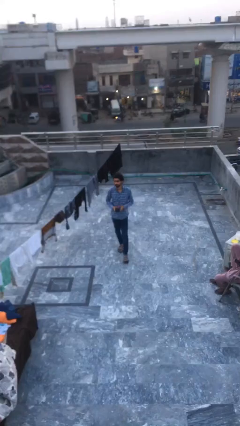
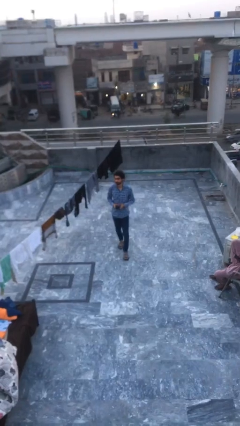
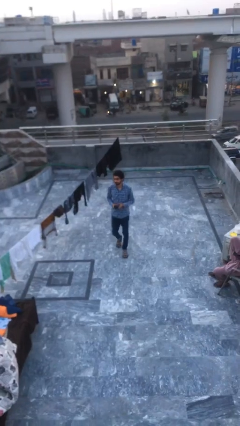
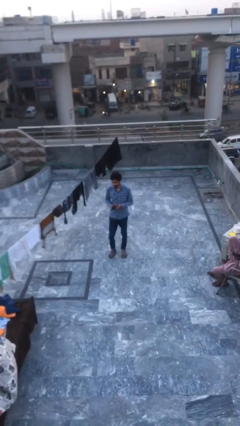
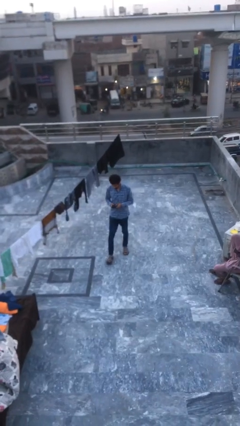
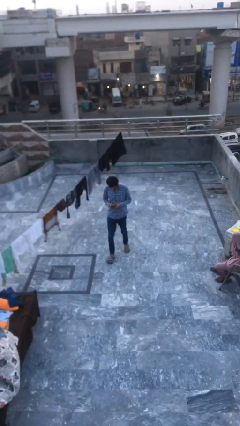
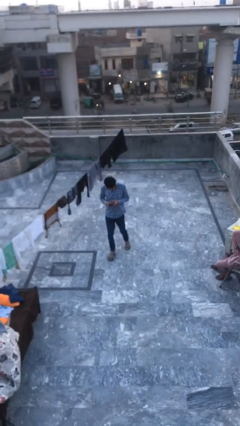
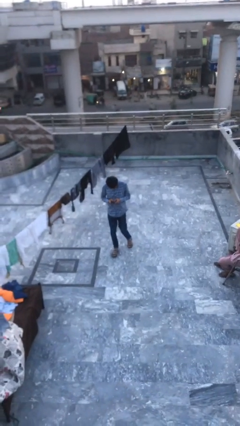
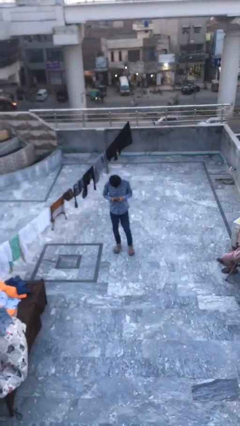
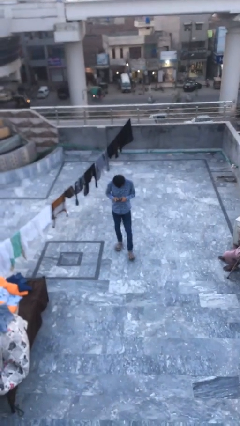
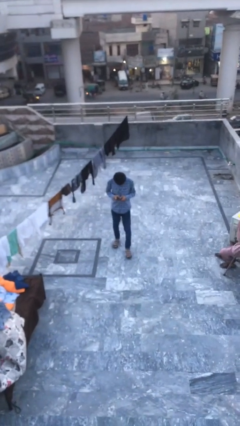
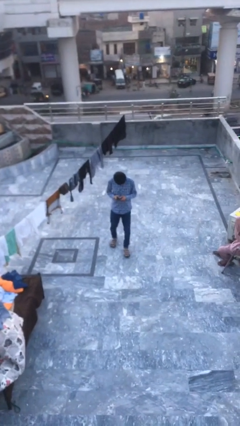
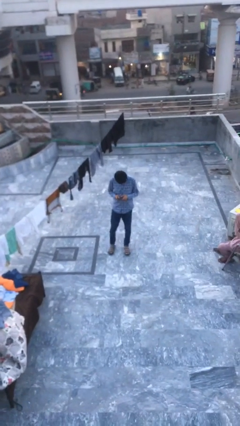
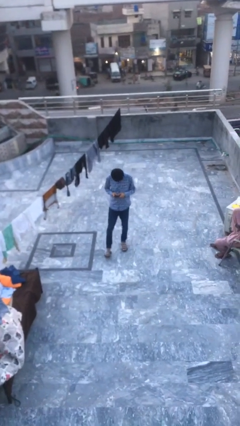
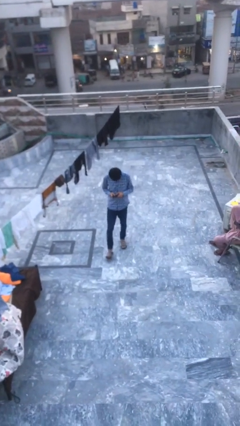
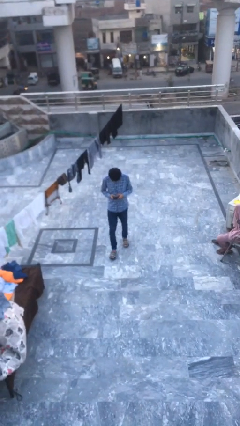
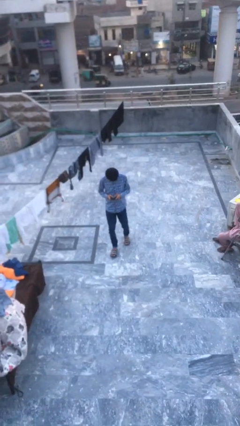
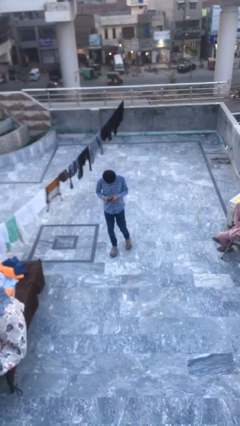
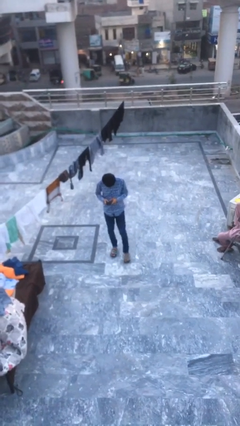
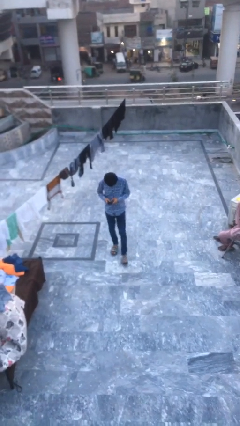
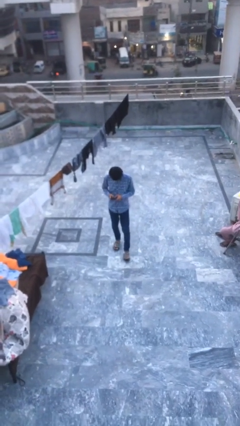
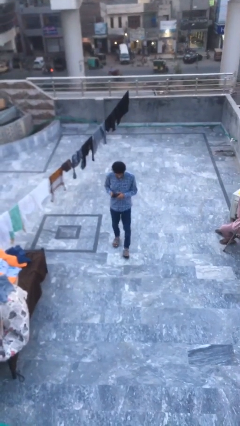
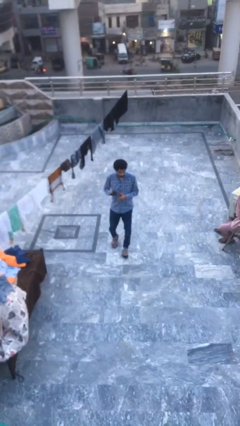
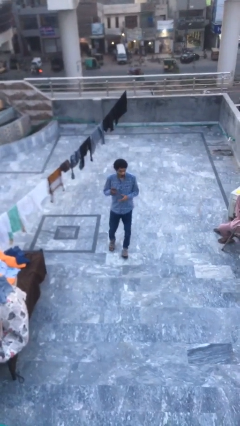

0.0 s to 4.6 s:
person texts on phone

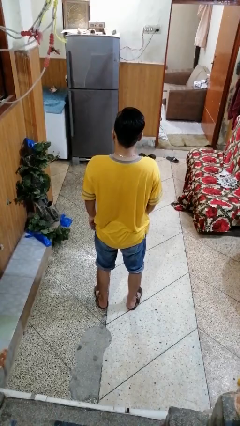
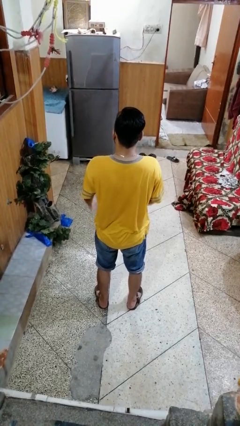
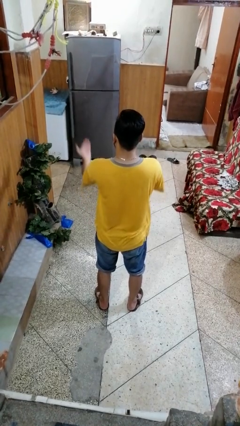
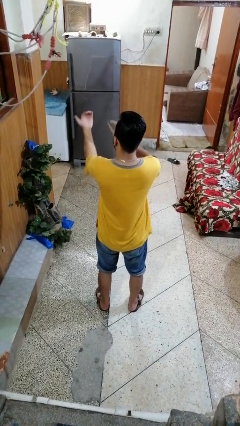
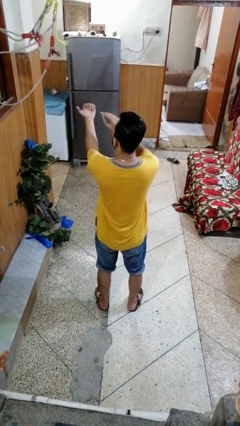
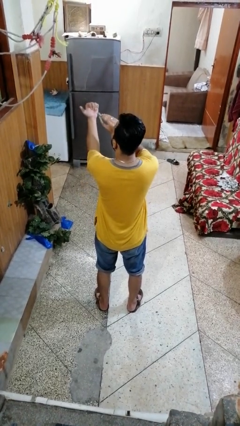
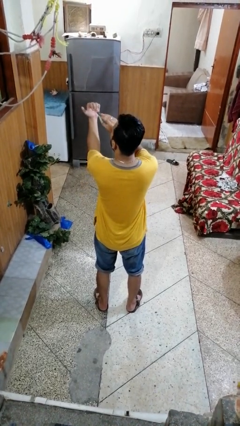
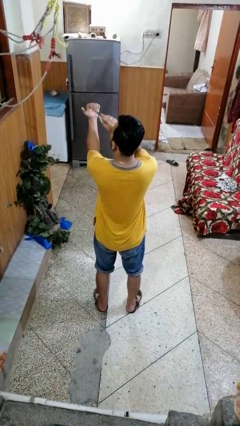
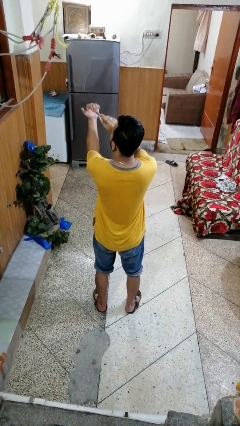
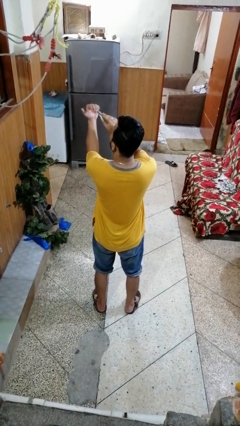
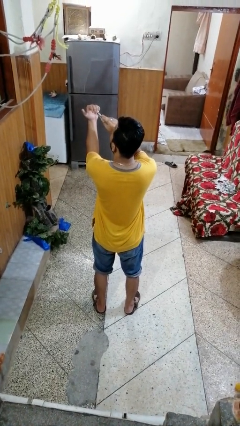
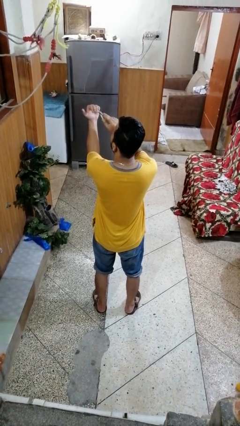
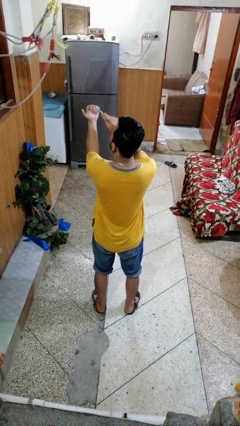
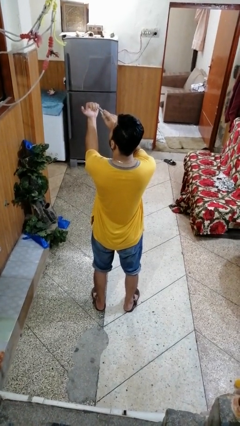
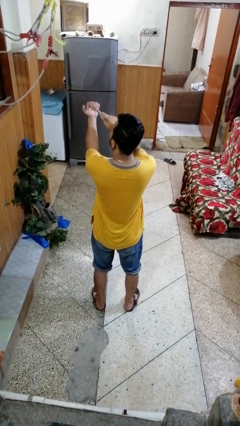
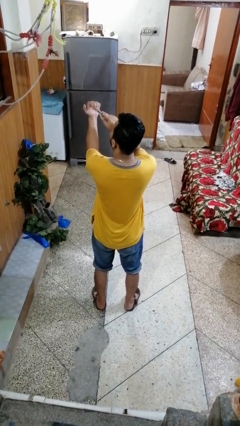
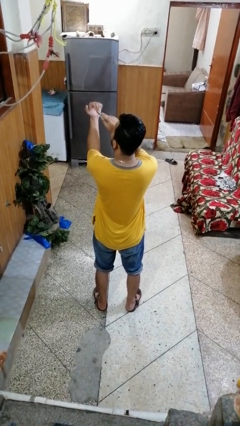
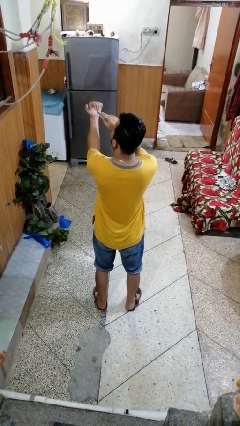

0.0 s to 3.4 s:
person clips fingernails

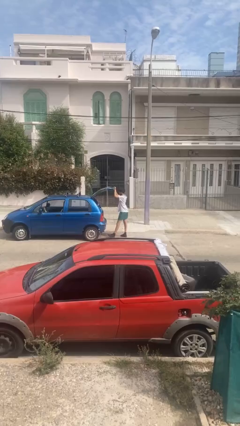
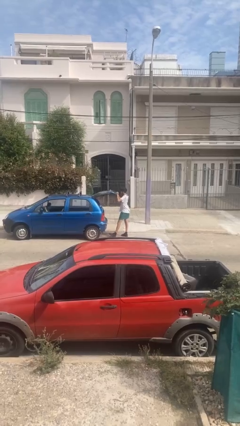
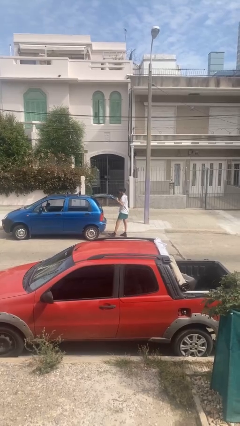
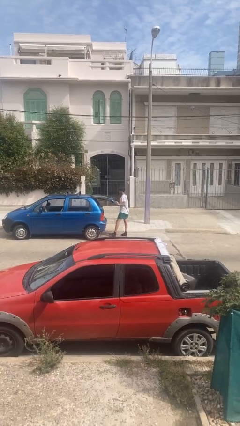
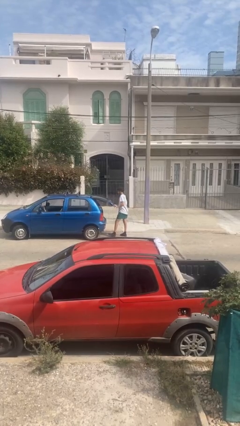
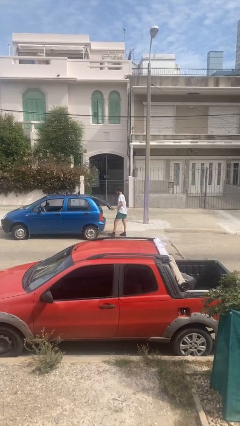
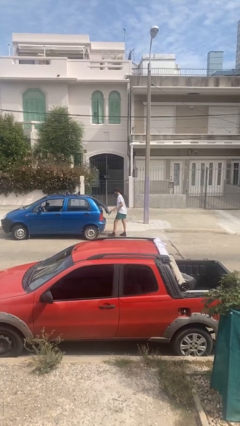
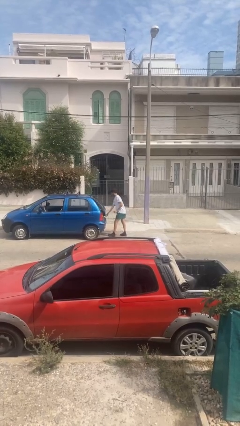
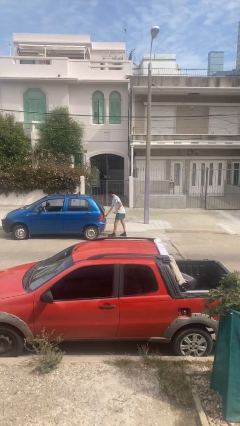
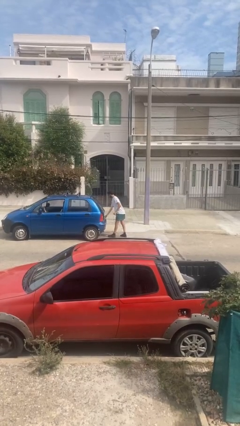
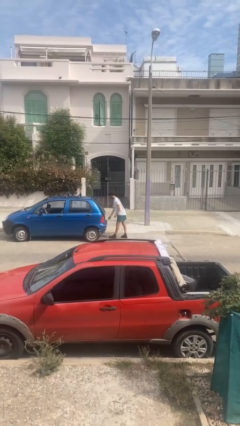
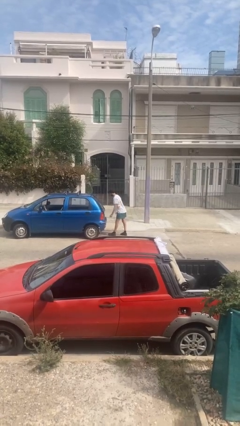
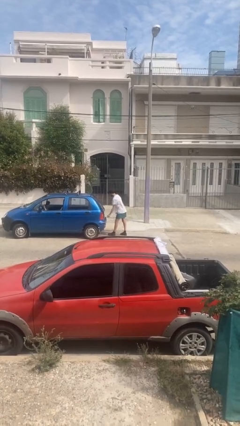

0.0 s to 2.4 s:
person closes car trunk

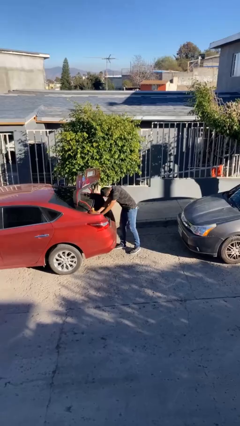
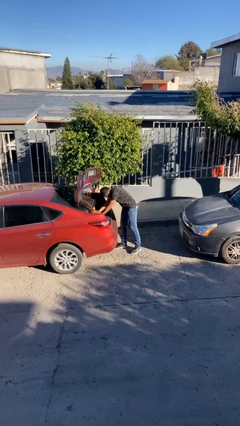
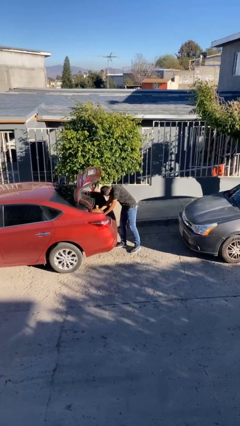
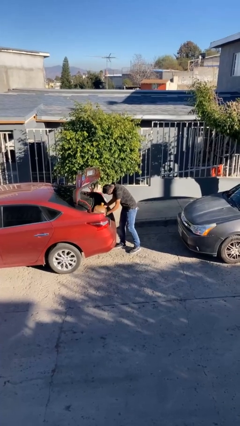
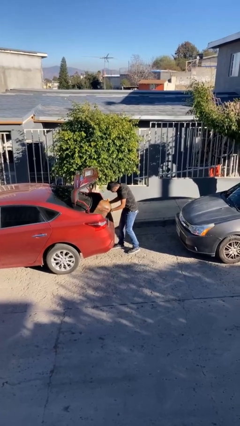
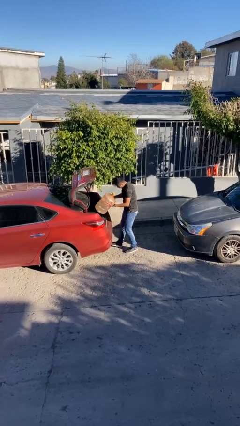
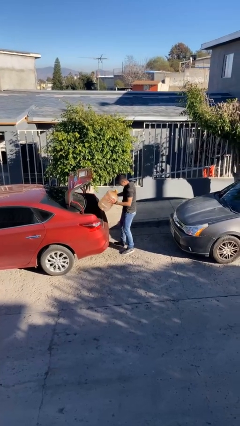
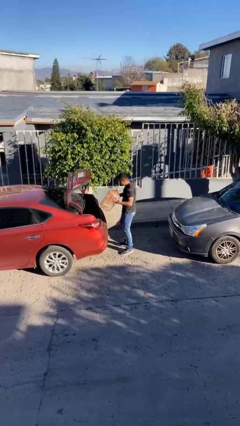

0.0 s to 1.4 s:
person unloads car

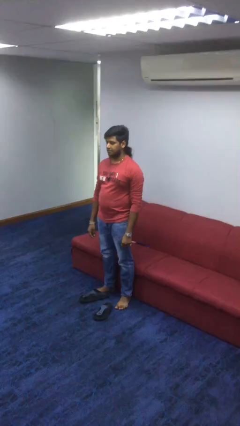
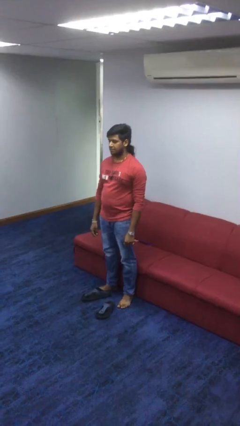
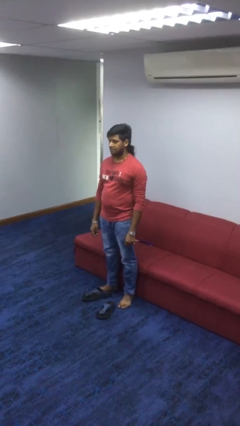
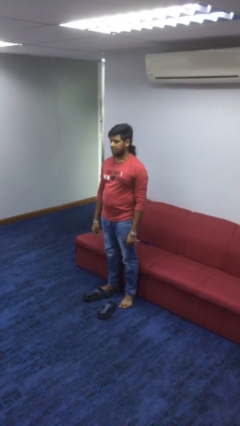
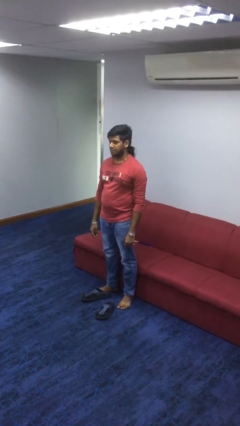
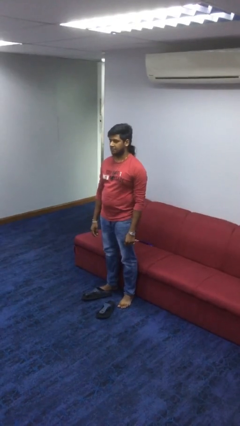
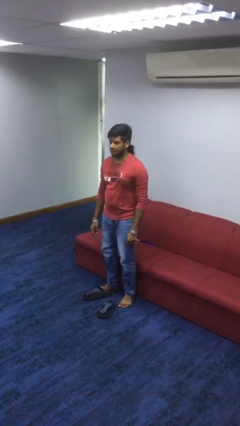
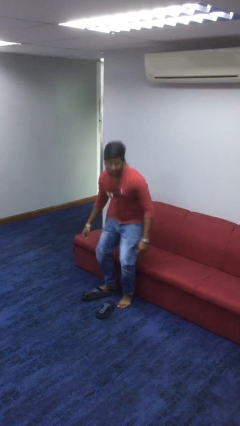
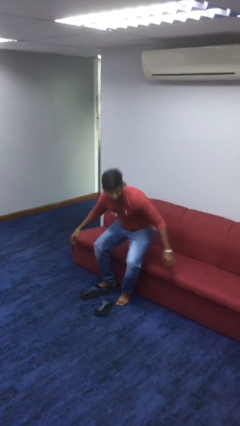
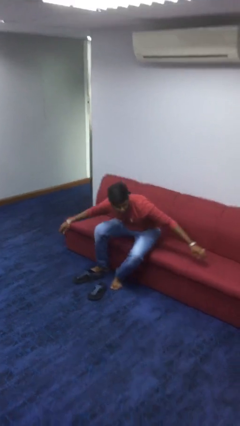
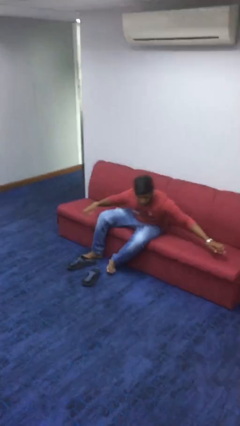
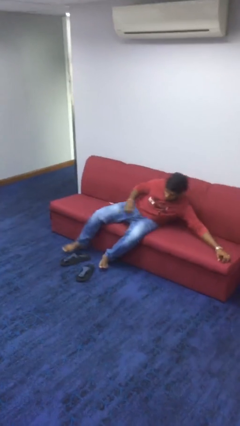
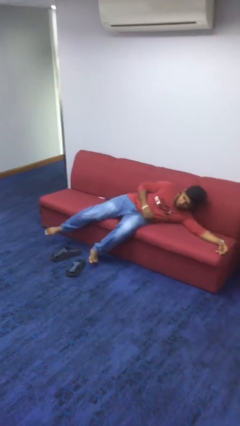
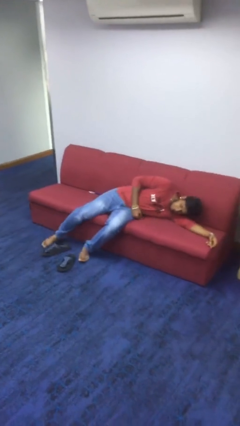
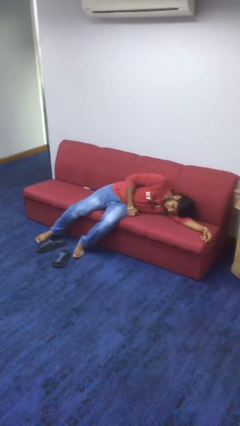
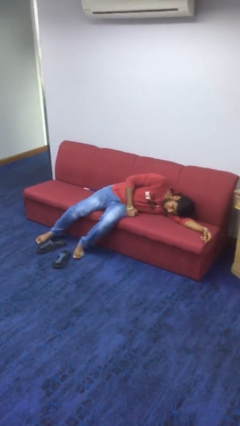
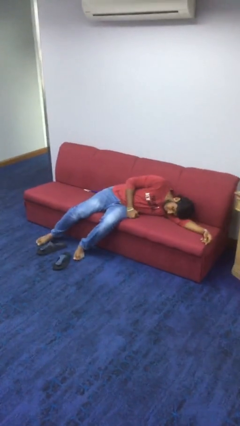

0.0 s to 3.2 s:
person lies down on couch

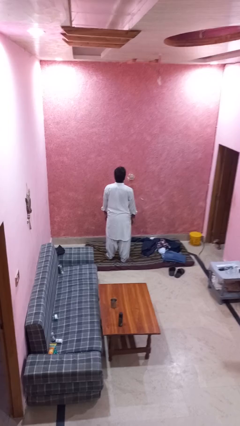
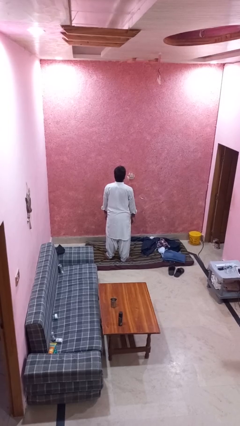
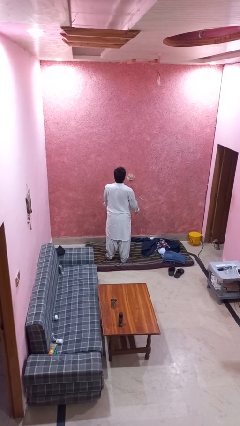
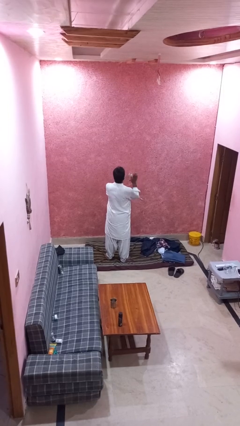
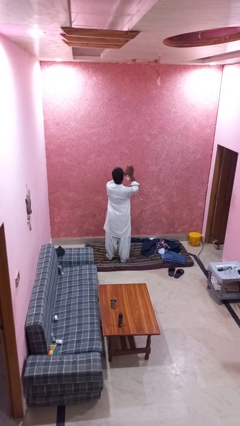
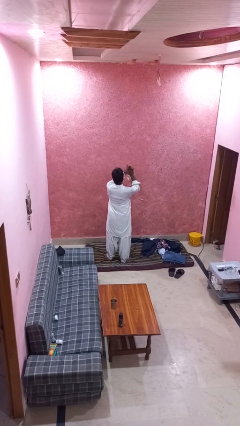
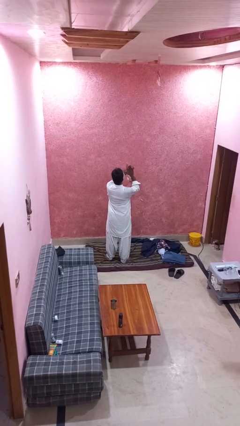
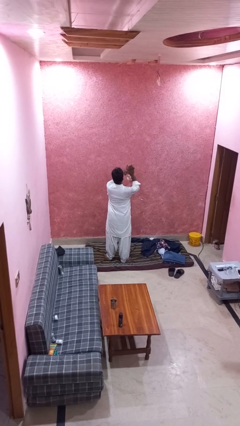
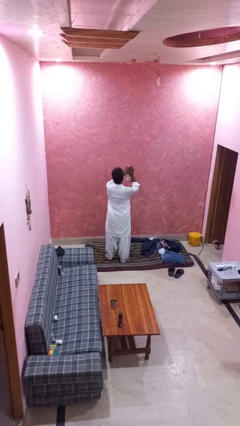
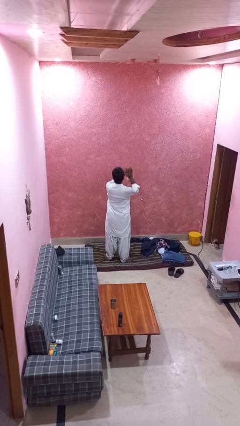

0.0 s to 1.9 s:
person claps hands

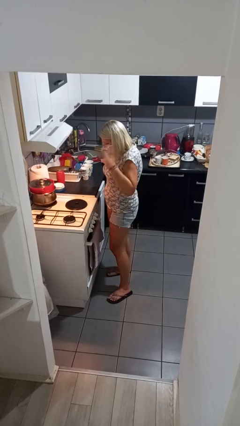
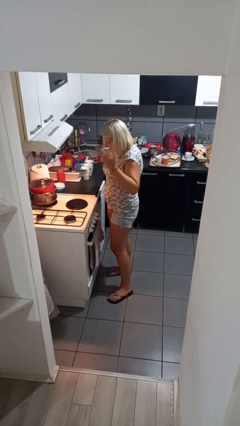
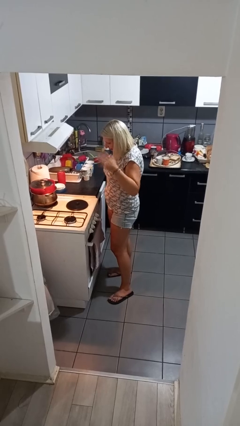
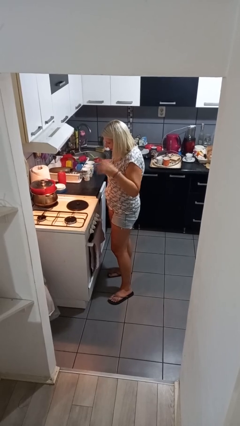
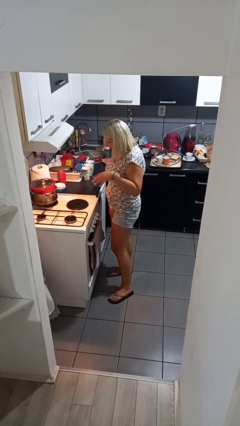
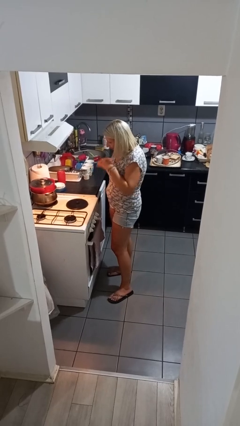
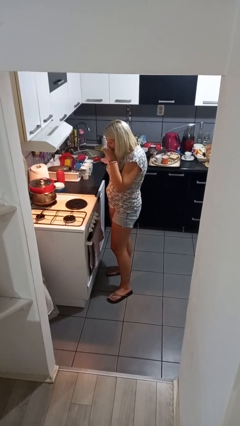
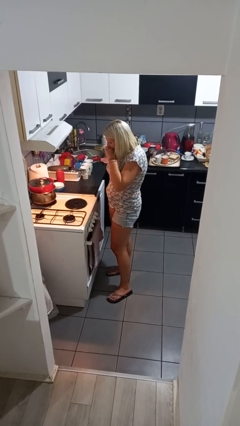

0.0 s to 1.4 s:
person burns hand
